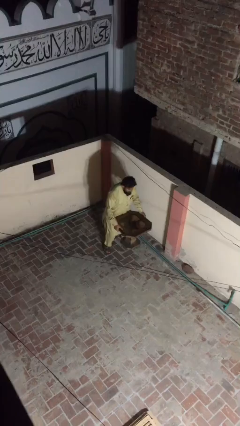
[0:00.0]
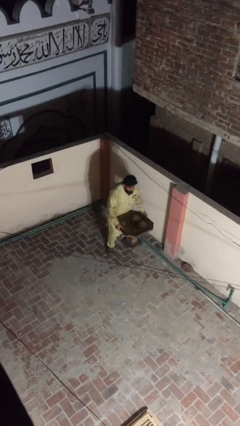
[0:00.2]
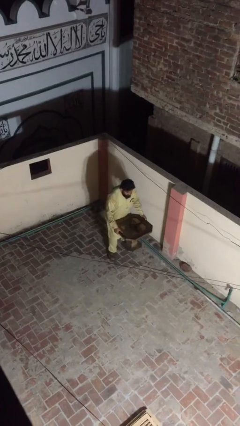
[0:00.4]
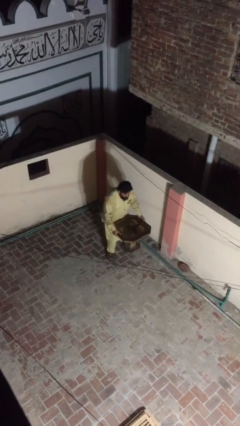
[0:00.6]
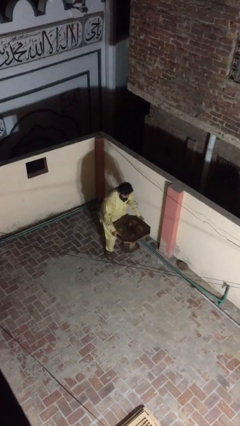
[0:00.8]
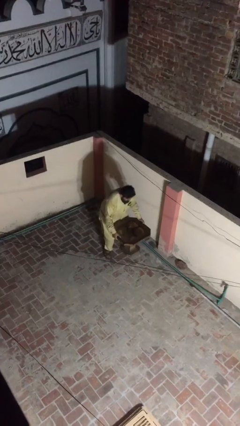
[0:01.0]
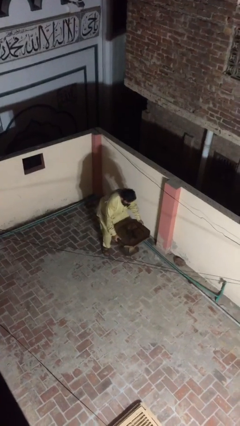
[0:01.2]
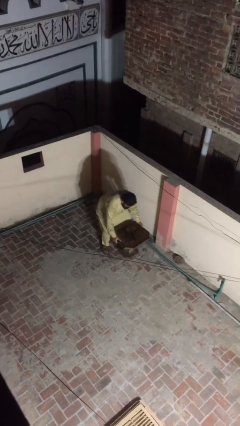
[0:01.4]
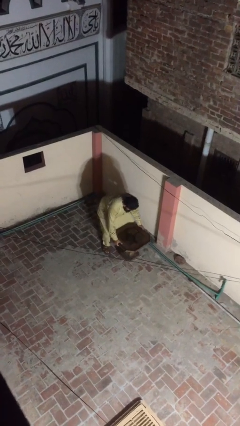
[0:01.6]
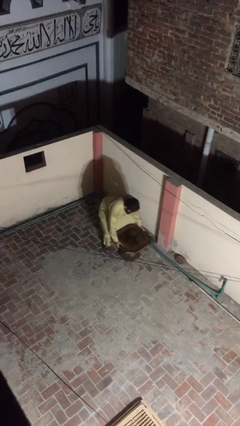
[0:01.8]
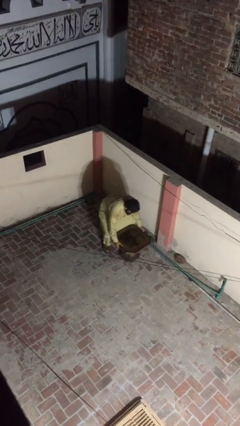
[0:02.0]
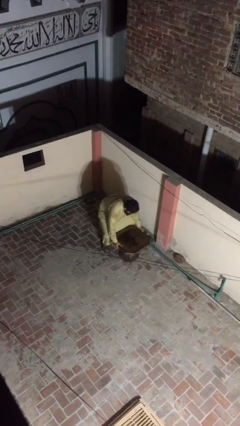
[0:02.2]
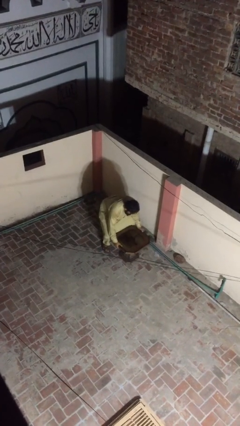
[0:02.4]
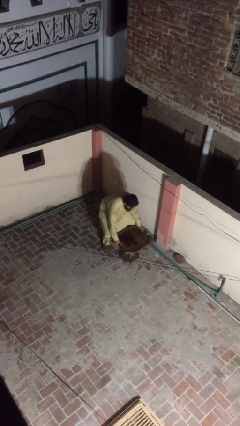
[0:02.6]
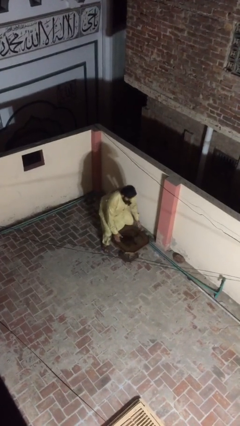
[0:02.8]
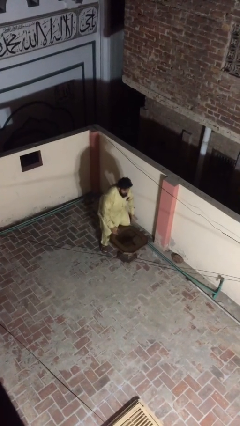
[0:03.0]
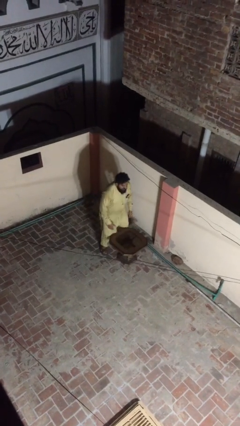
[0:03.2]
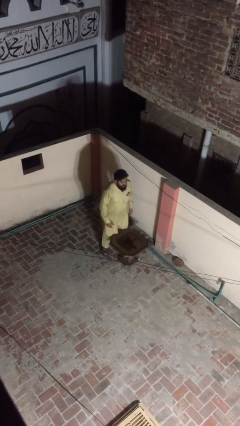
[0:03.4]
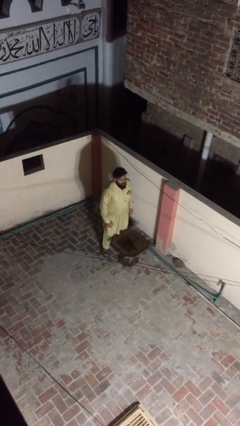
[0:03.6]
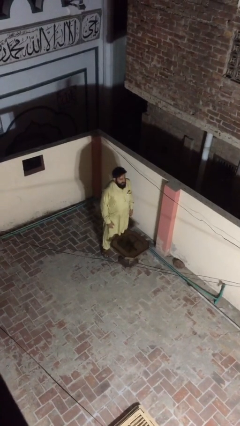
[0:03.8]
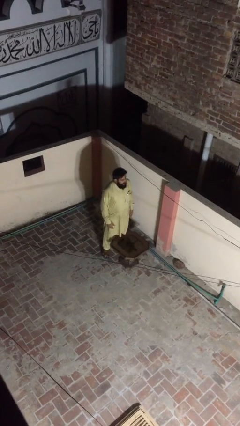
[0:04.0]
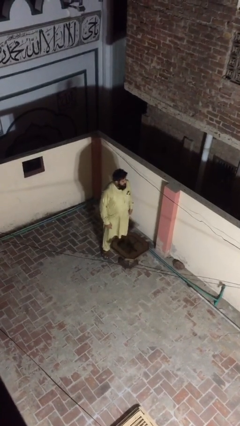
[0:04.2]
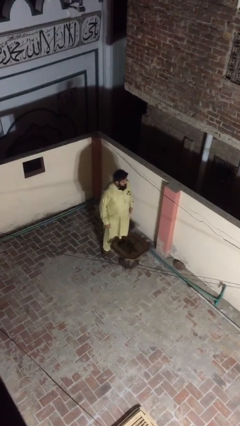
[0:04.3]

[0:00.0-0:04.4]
person puts down object on floor

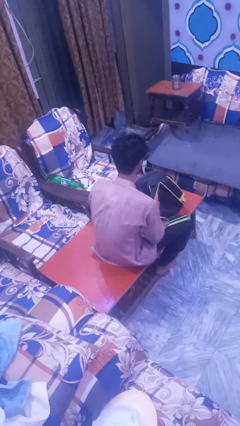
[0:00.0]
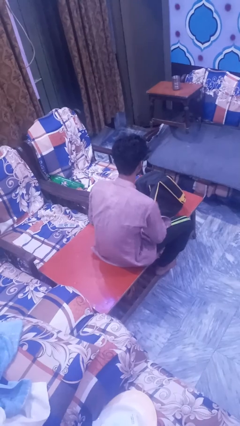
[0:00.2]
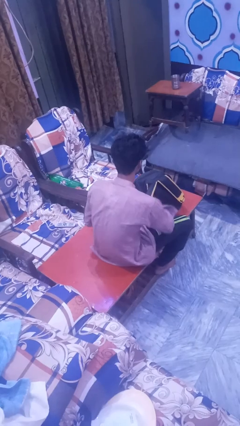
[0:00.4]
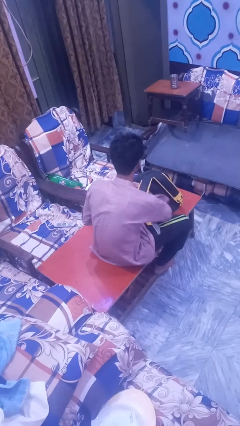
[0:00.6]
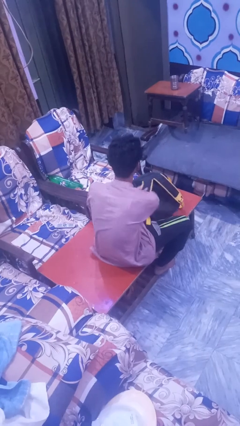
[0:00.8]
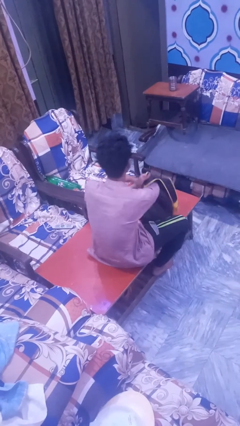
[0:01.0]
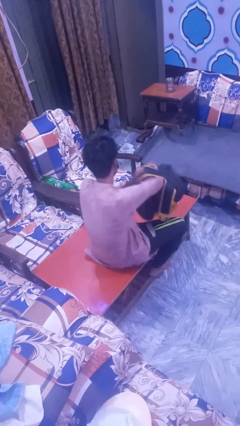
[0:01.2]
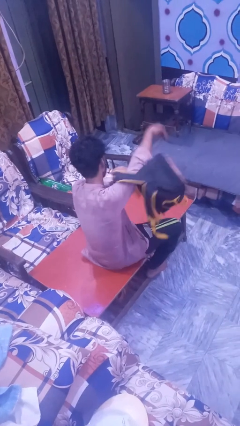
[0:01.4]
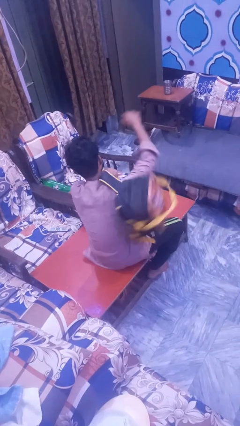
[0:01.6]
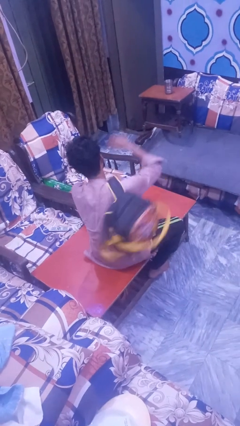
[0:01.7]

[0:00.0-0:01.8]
person puts on backpack

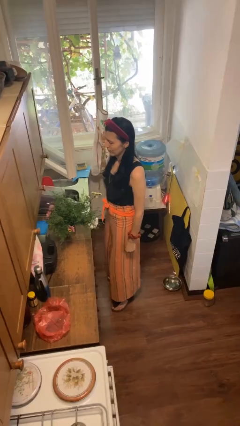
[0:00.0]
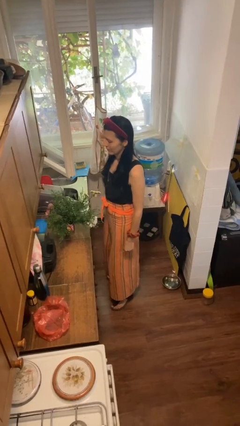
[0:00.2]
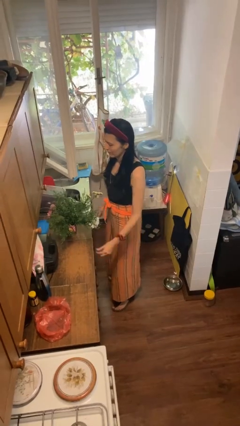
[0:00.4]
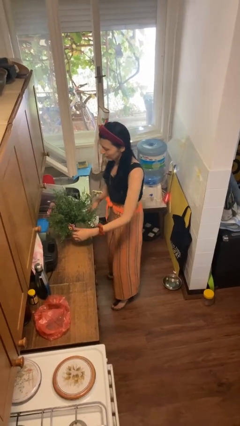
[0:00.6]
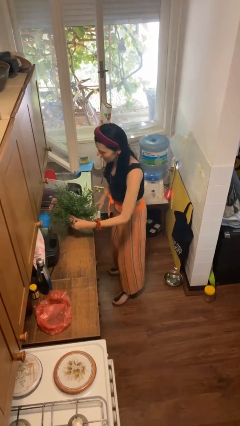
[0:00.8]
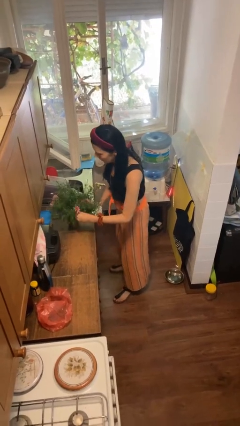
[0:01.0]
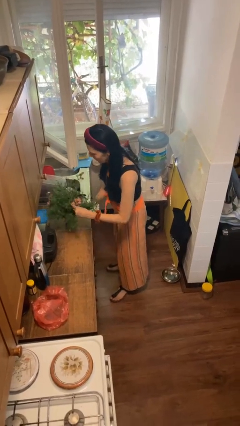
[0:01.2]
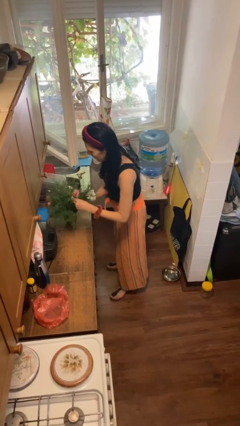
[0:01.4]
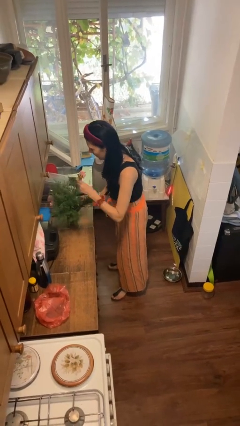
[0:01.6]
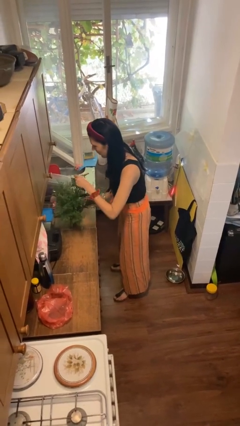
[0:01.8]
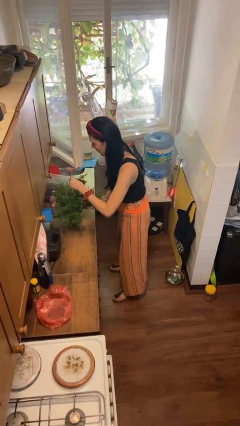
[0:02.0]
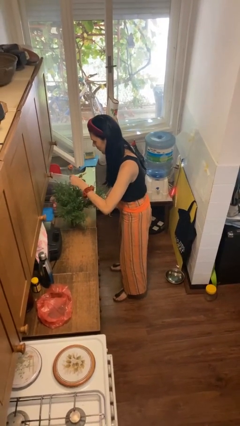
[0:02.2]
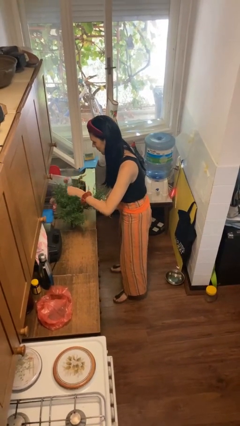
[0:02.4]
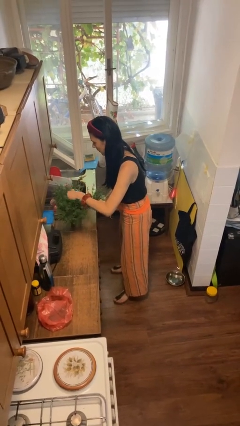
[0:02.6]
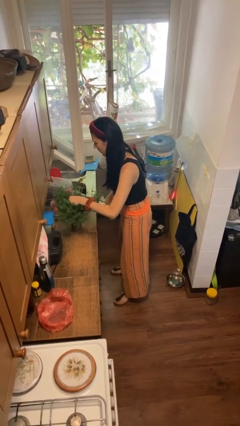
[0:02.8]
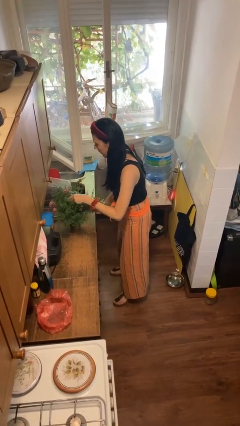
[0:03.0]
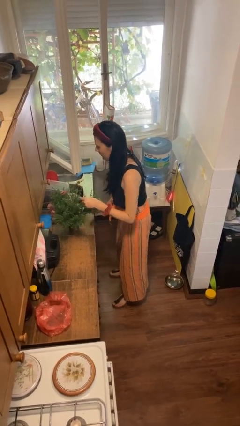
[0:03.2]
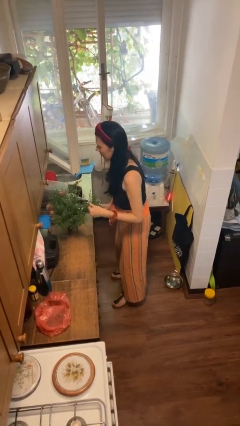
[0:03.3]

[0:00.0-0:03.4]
person arranges flowers in vase

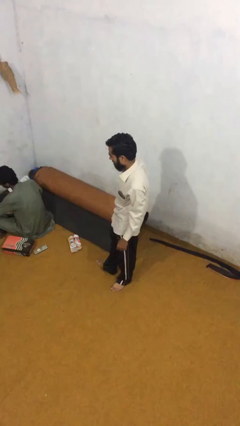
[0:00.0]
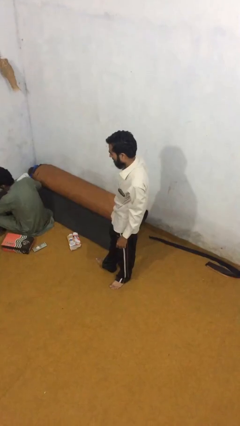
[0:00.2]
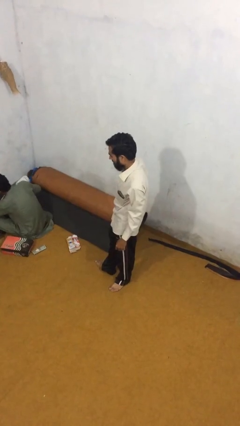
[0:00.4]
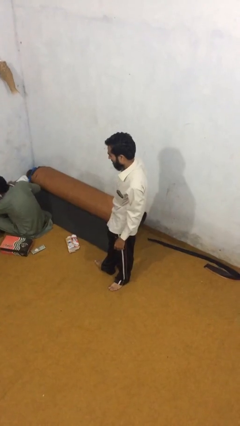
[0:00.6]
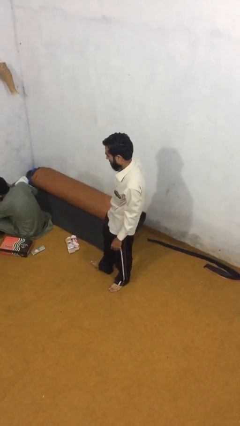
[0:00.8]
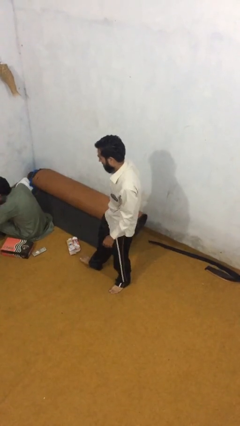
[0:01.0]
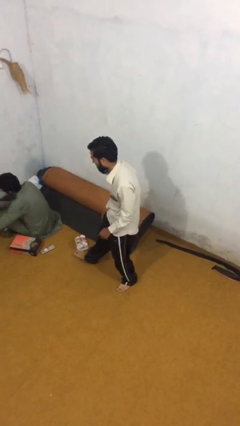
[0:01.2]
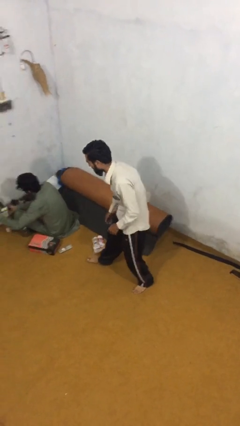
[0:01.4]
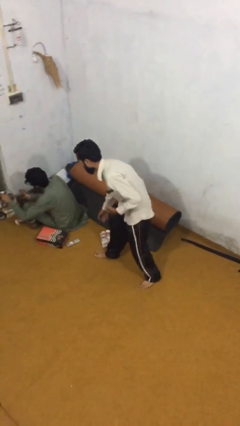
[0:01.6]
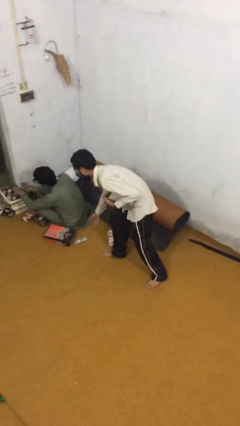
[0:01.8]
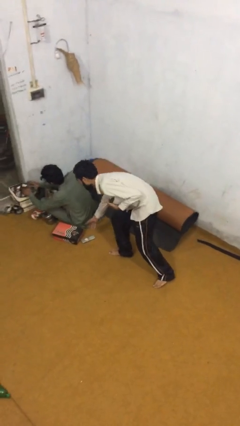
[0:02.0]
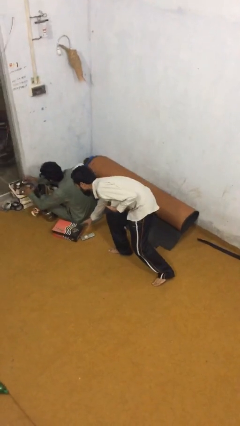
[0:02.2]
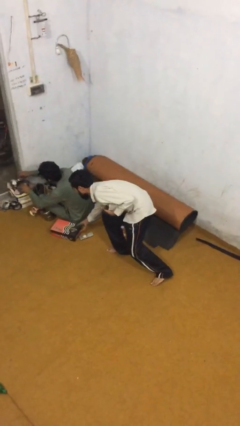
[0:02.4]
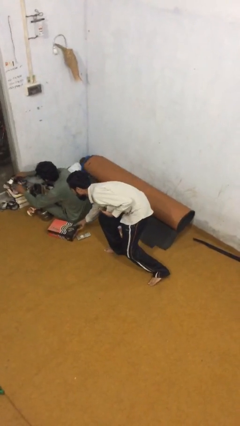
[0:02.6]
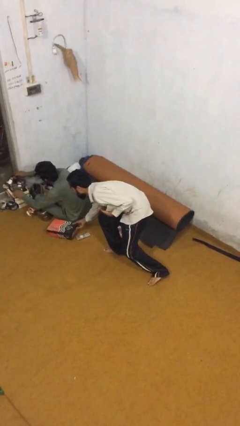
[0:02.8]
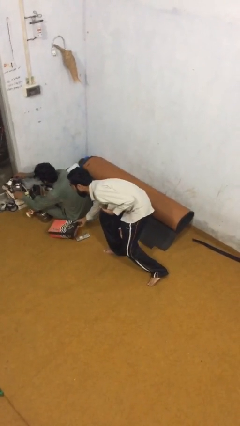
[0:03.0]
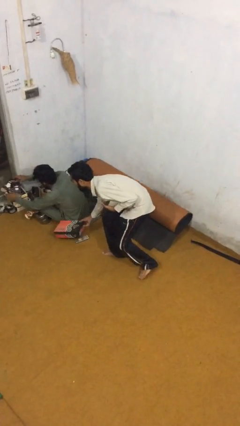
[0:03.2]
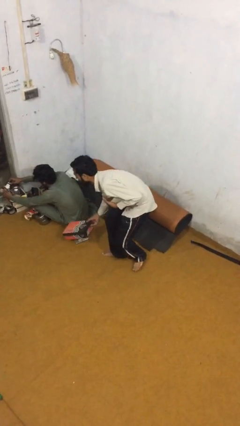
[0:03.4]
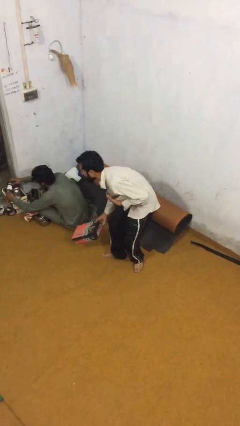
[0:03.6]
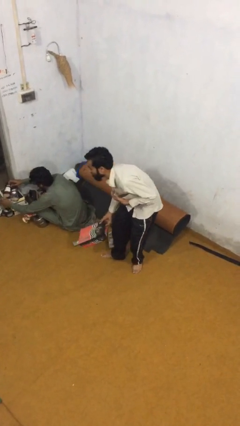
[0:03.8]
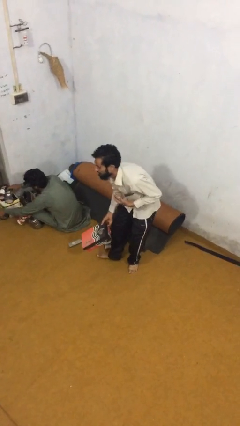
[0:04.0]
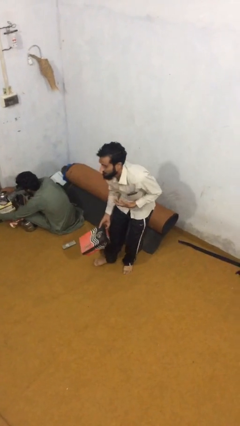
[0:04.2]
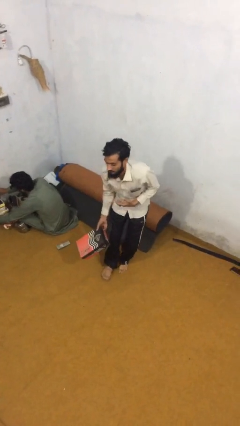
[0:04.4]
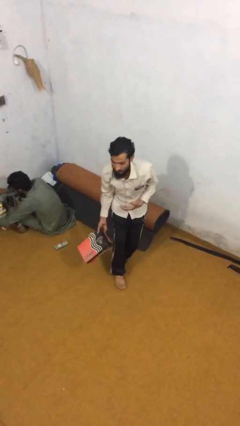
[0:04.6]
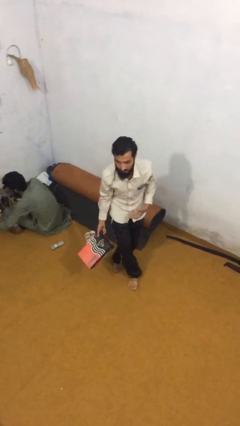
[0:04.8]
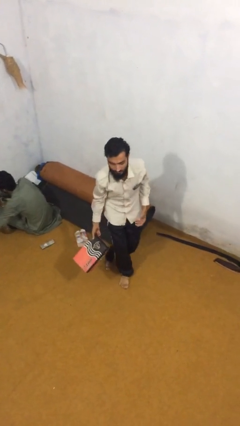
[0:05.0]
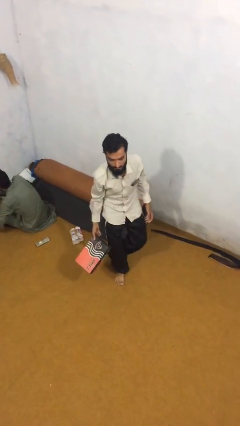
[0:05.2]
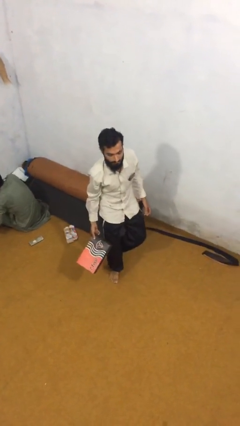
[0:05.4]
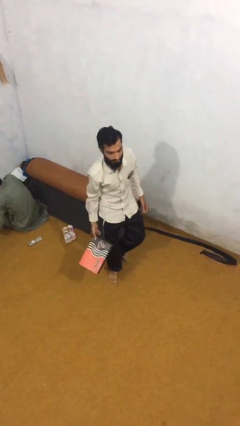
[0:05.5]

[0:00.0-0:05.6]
person steals object from person

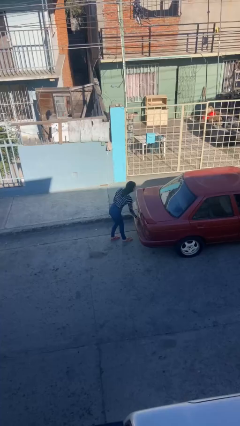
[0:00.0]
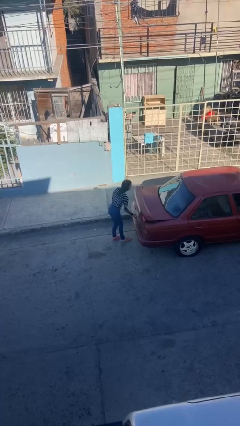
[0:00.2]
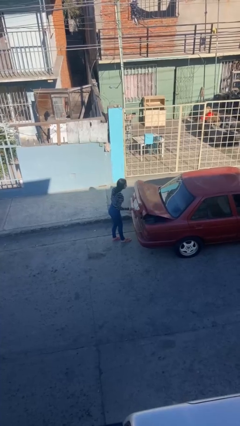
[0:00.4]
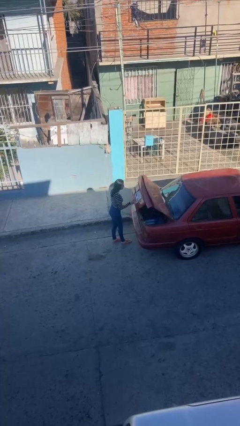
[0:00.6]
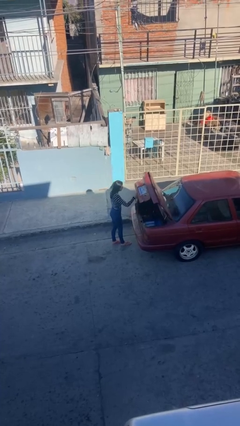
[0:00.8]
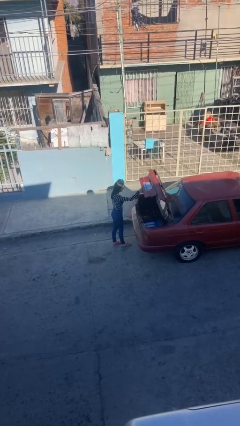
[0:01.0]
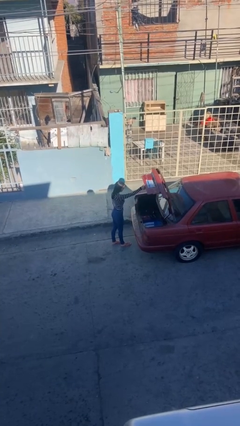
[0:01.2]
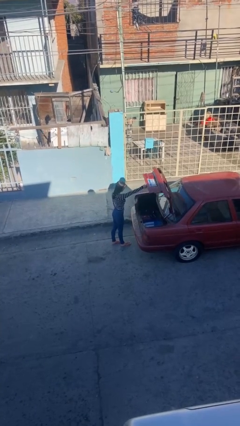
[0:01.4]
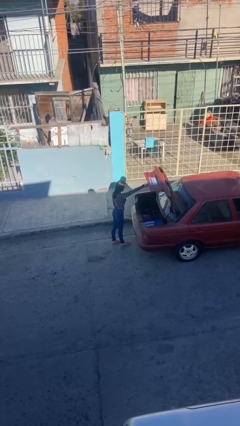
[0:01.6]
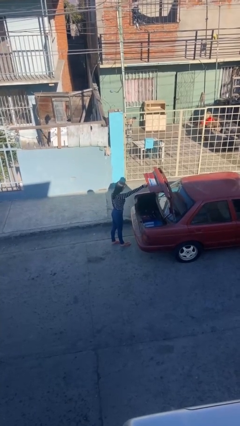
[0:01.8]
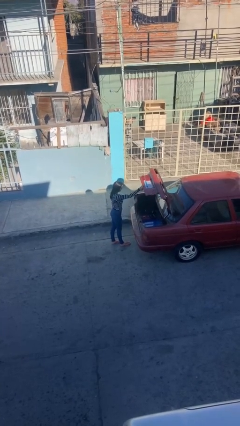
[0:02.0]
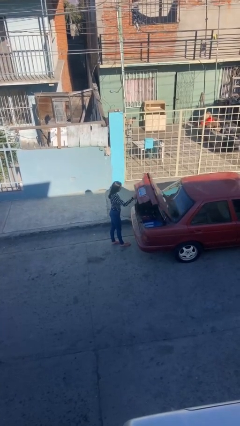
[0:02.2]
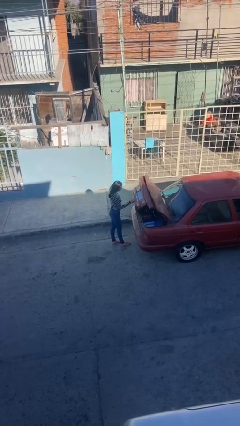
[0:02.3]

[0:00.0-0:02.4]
person opens car trunk
